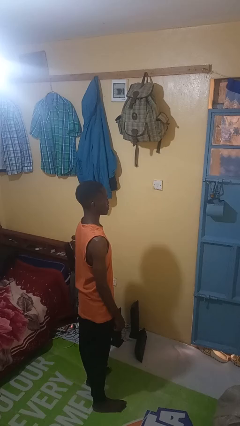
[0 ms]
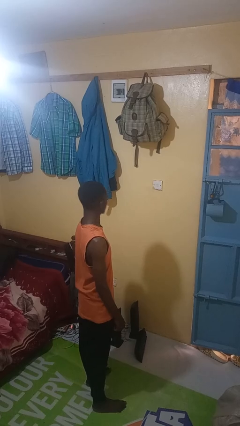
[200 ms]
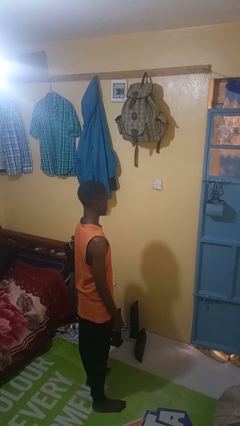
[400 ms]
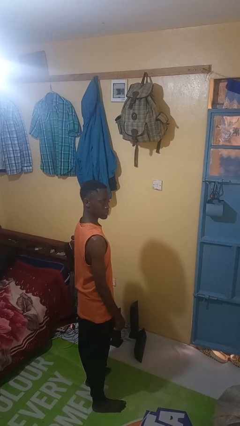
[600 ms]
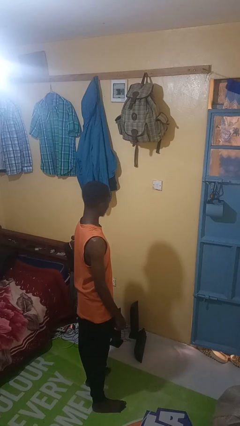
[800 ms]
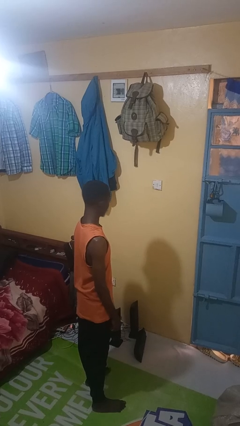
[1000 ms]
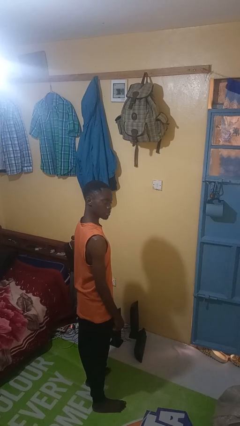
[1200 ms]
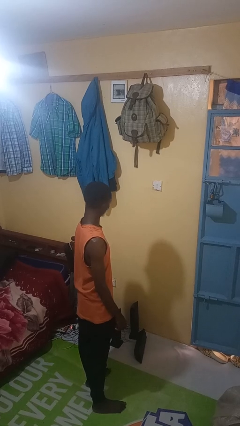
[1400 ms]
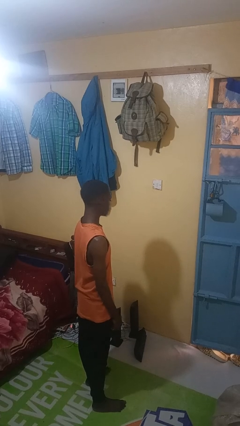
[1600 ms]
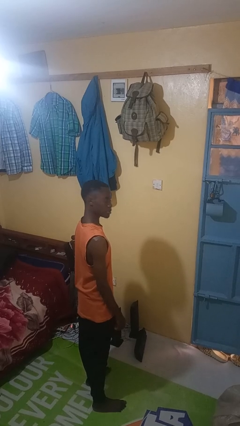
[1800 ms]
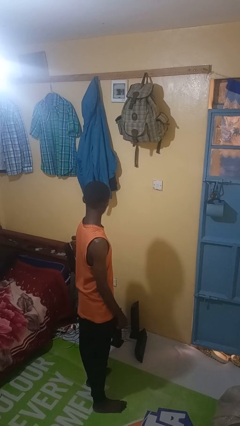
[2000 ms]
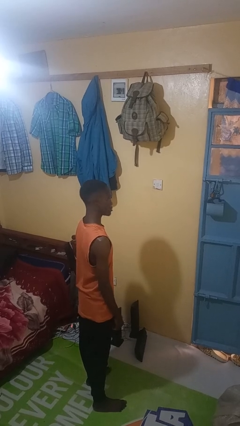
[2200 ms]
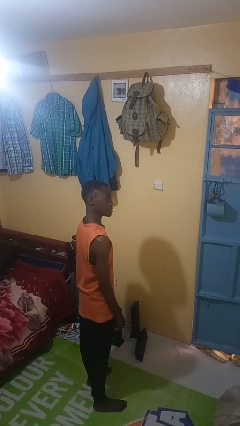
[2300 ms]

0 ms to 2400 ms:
person shakes head

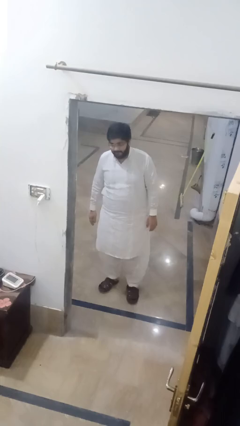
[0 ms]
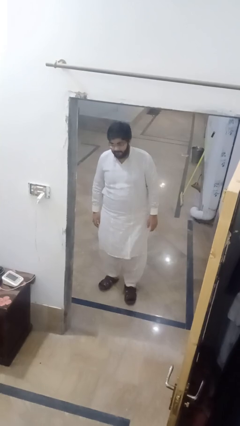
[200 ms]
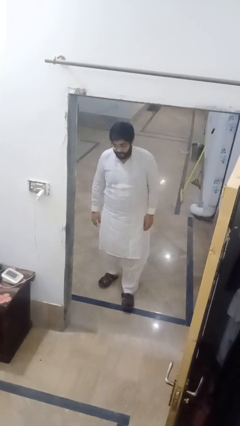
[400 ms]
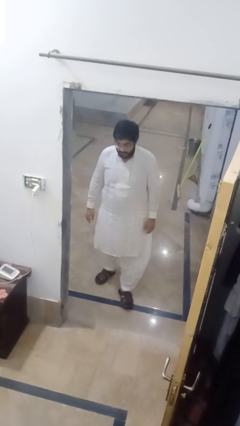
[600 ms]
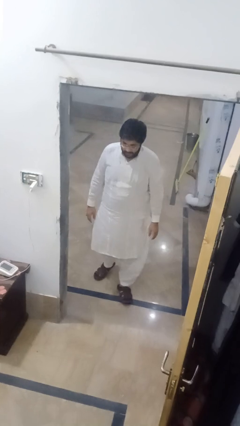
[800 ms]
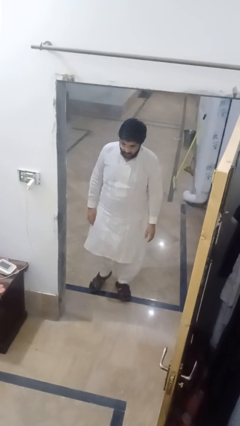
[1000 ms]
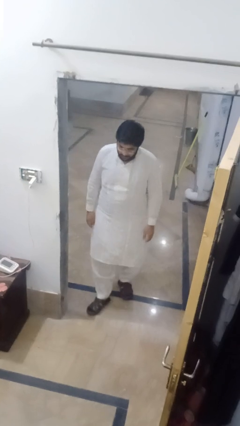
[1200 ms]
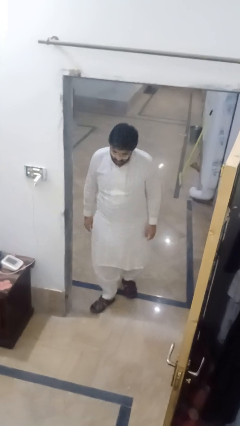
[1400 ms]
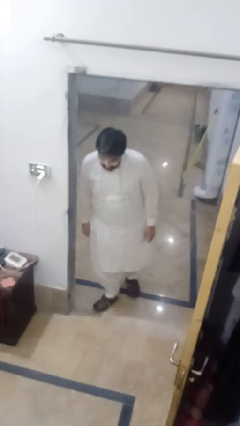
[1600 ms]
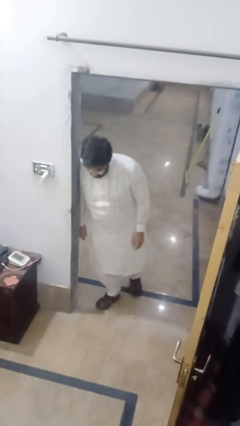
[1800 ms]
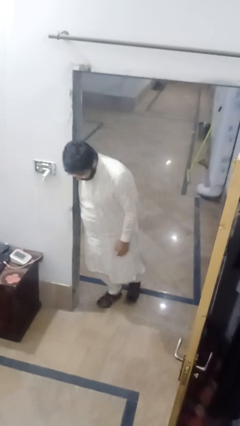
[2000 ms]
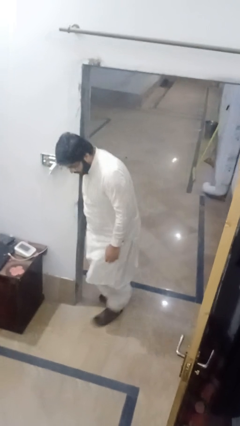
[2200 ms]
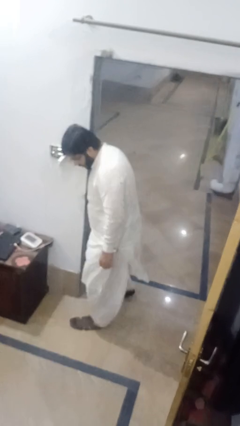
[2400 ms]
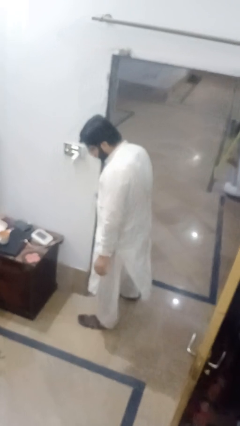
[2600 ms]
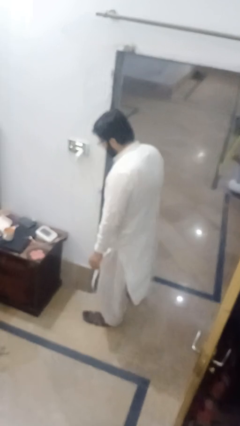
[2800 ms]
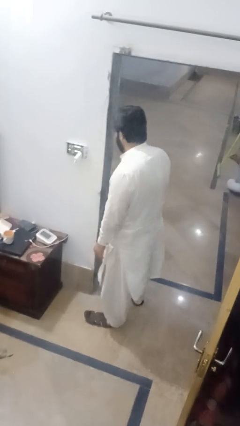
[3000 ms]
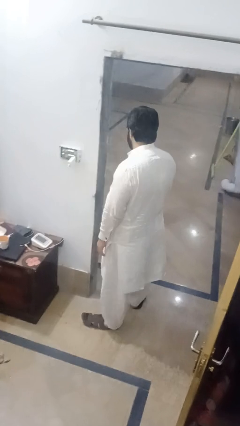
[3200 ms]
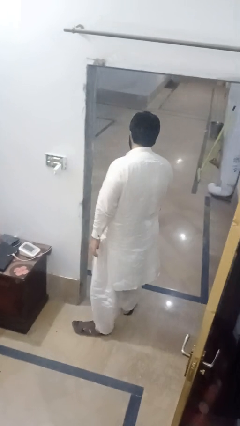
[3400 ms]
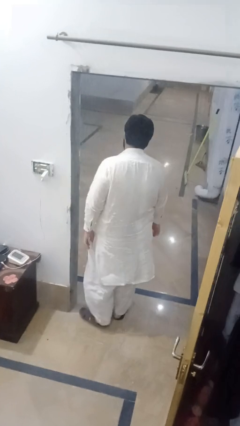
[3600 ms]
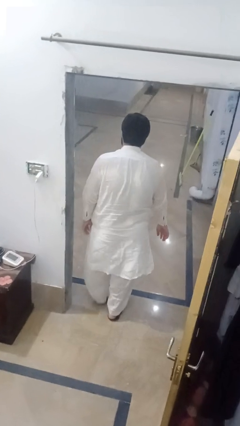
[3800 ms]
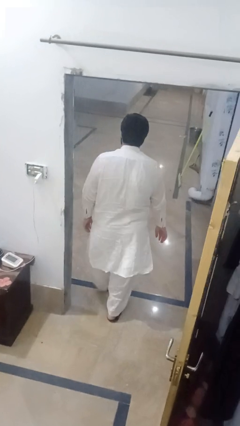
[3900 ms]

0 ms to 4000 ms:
person bumps into wall

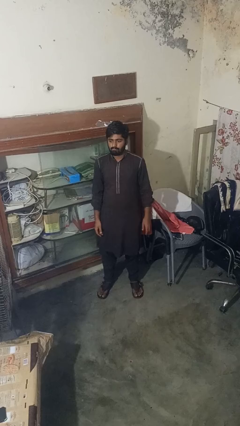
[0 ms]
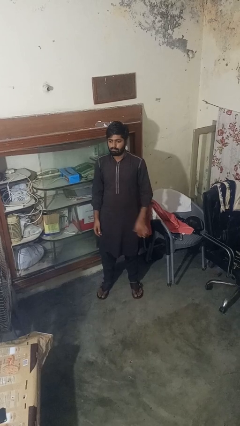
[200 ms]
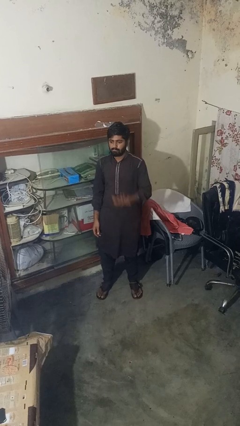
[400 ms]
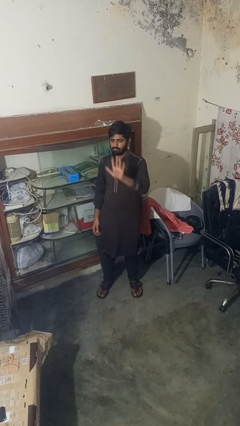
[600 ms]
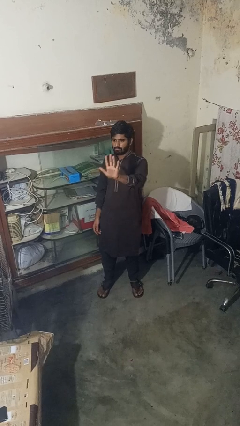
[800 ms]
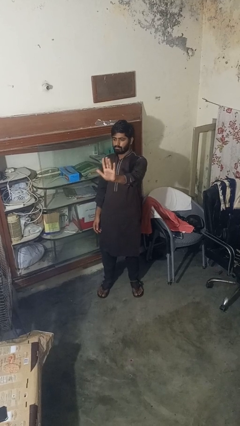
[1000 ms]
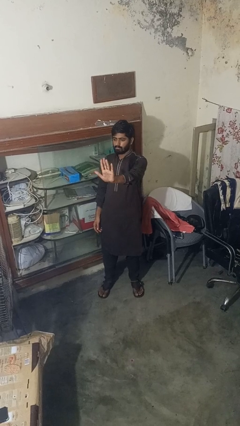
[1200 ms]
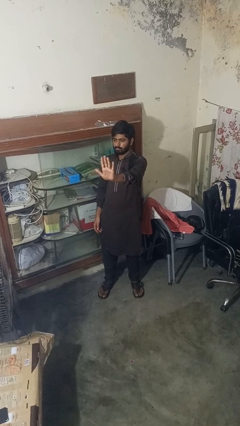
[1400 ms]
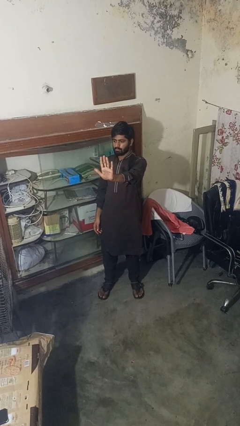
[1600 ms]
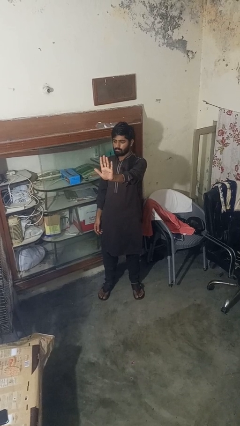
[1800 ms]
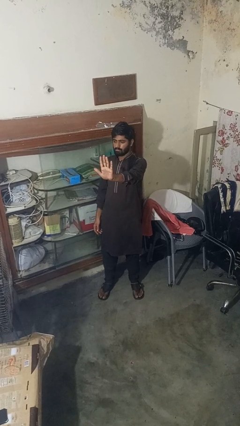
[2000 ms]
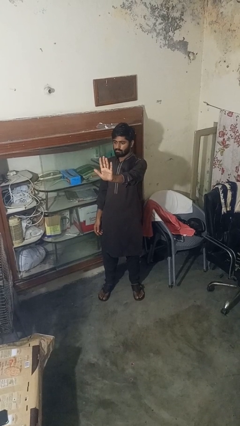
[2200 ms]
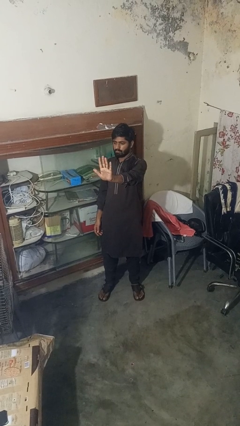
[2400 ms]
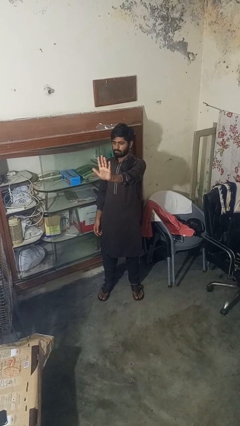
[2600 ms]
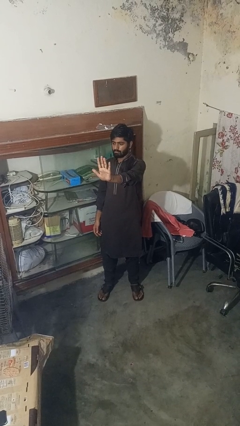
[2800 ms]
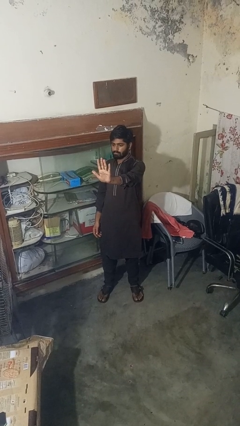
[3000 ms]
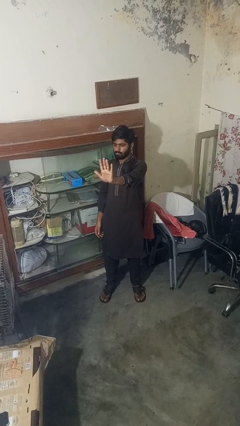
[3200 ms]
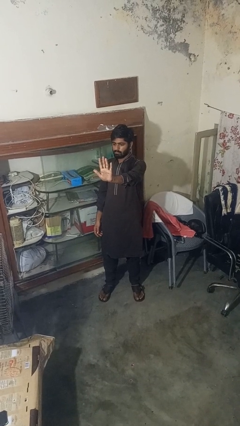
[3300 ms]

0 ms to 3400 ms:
person gestures number five

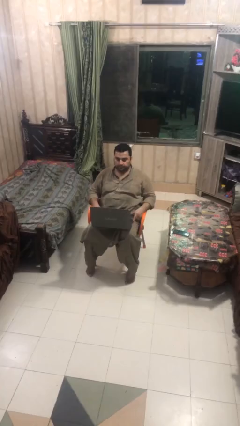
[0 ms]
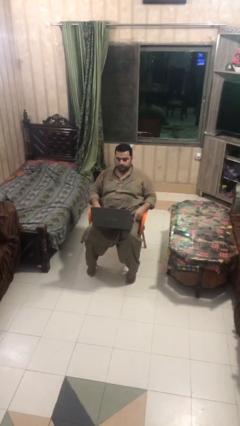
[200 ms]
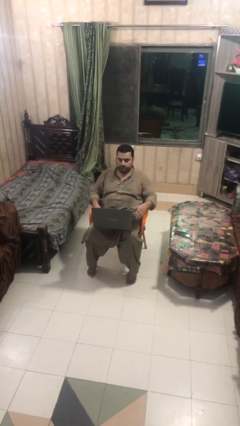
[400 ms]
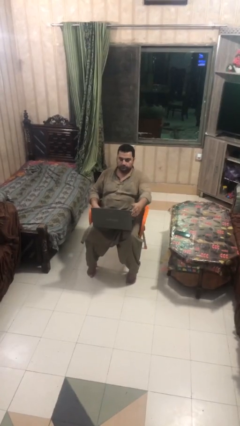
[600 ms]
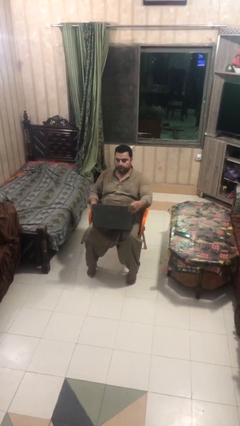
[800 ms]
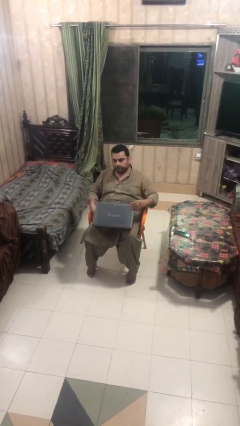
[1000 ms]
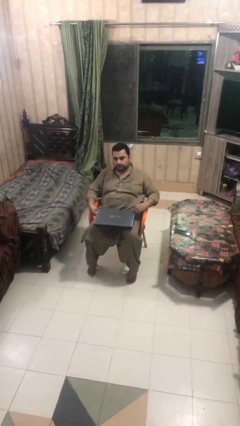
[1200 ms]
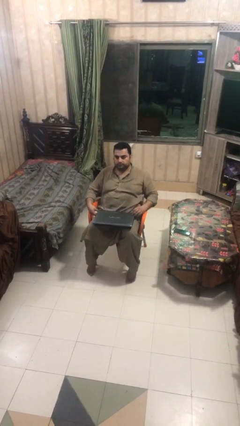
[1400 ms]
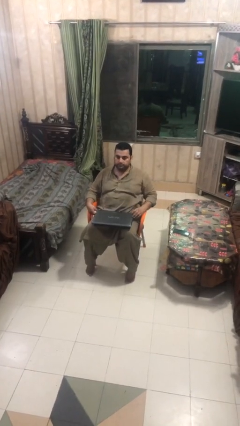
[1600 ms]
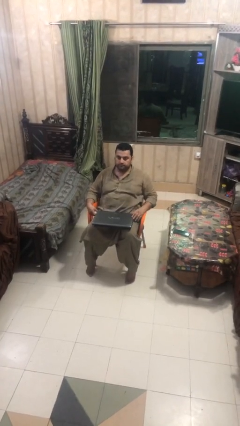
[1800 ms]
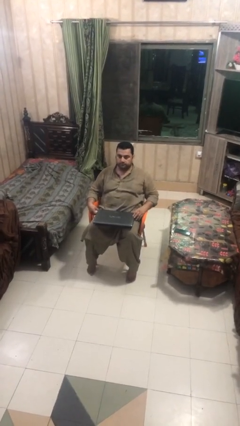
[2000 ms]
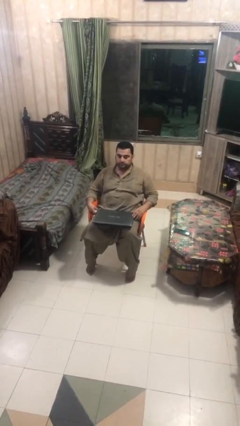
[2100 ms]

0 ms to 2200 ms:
person closes laptop

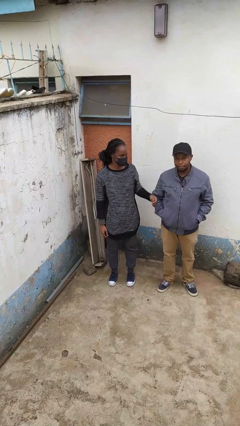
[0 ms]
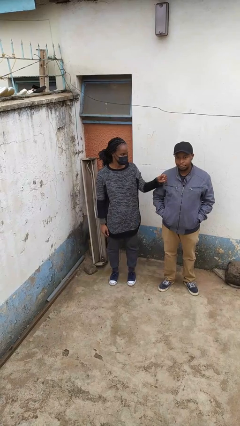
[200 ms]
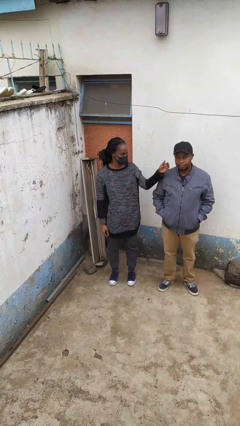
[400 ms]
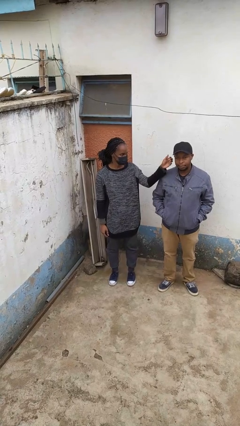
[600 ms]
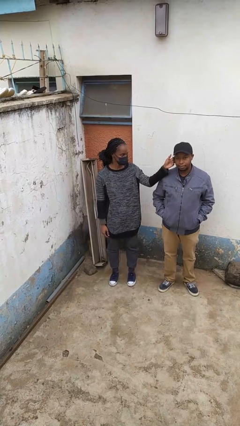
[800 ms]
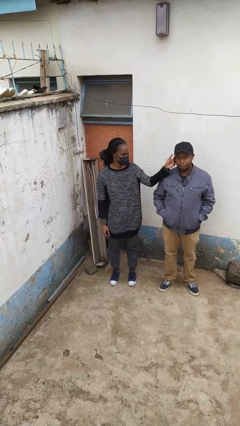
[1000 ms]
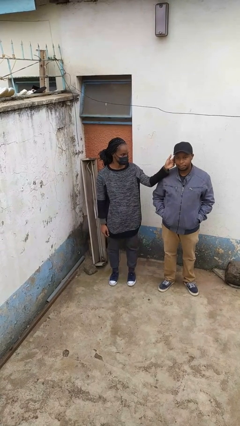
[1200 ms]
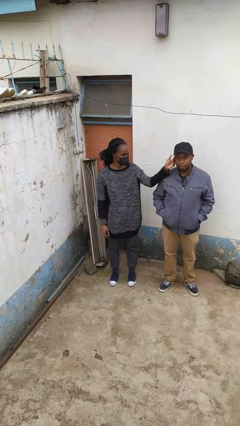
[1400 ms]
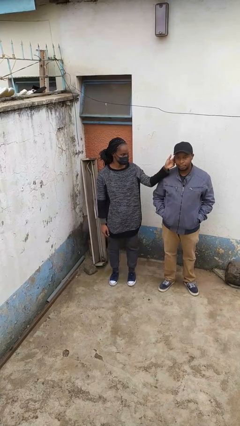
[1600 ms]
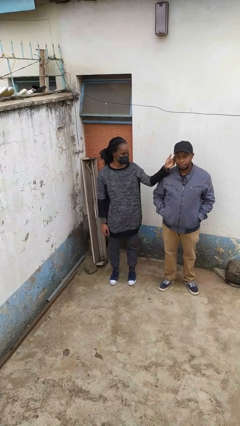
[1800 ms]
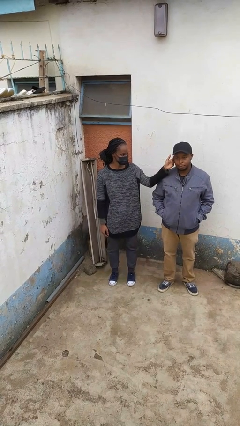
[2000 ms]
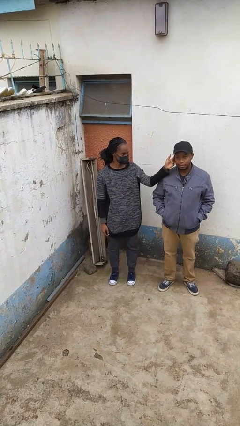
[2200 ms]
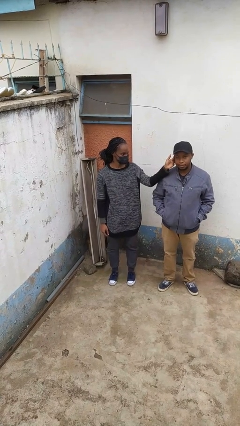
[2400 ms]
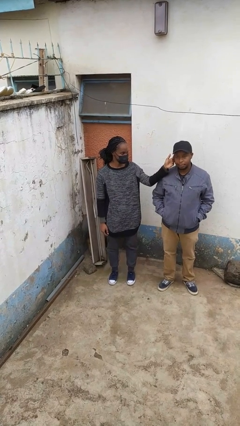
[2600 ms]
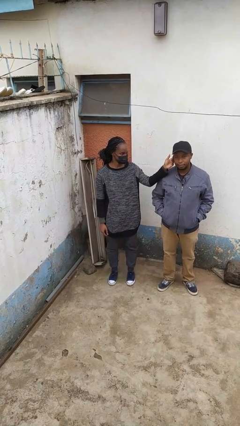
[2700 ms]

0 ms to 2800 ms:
person touches face of person

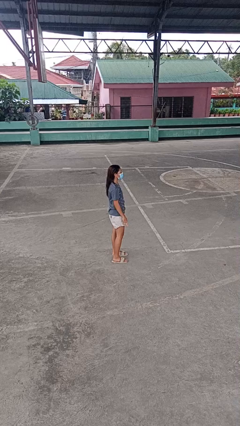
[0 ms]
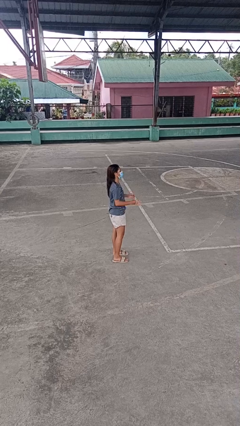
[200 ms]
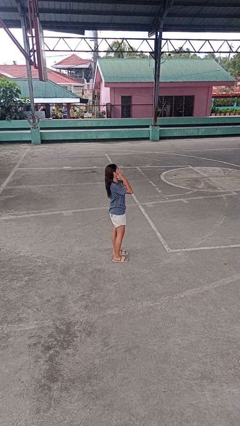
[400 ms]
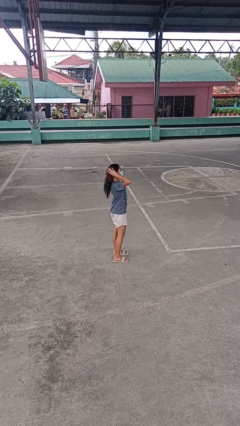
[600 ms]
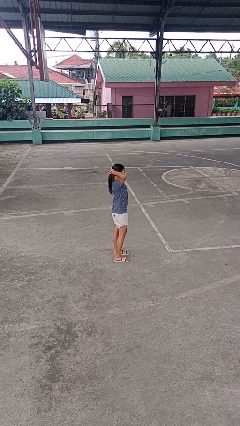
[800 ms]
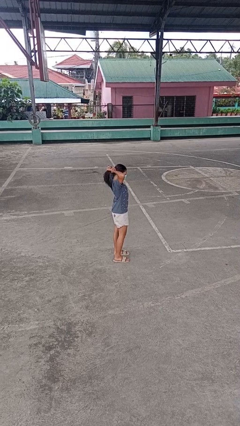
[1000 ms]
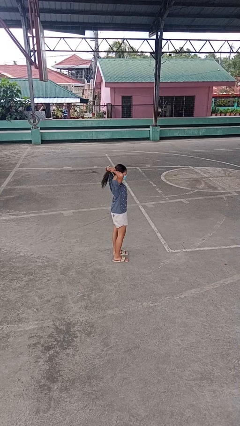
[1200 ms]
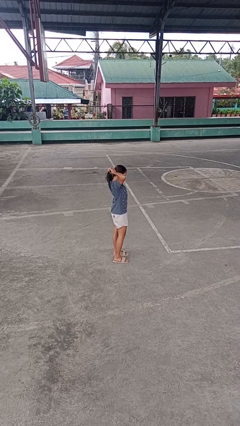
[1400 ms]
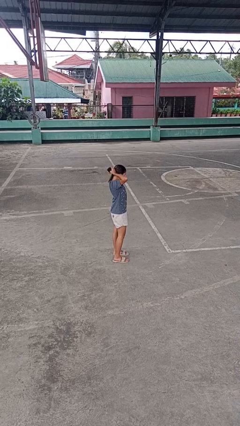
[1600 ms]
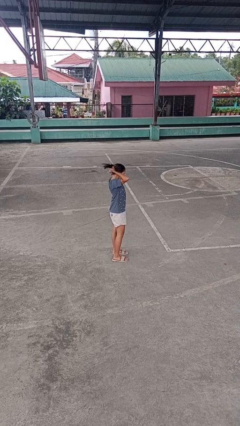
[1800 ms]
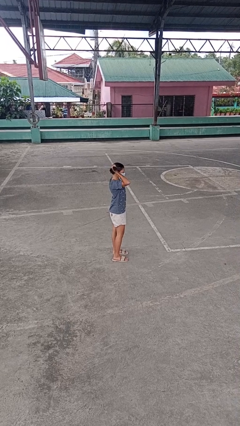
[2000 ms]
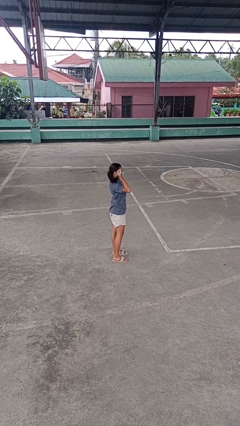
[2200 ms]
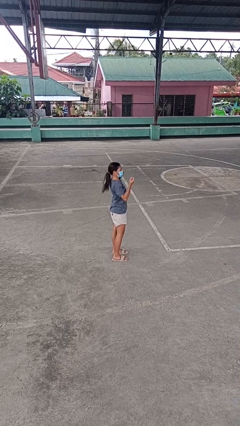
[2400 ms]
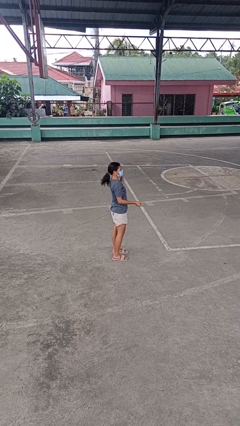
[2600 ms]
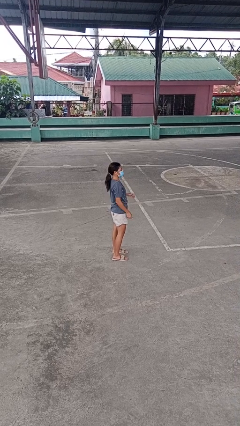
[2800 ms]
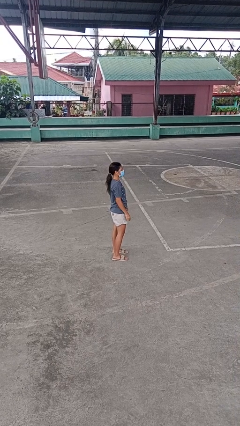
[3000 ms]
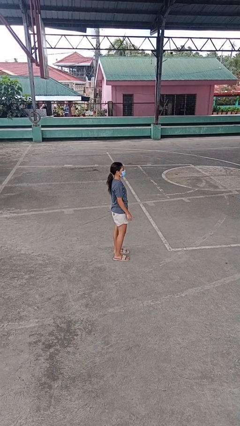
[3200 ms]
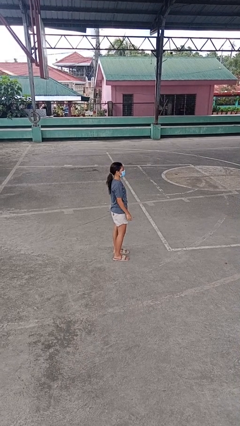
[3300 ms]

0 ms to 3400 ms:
person puts hair in ponytail
